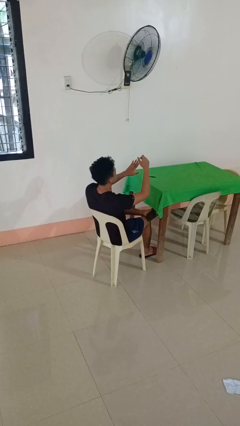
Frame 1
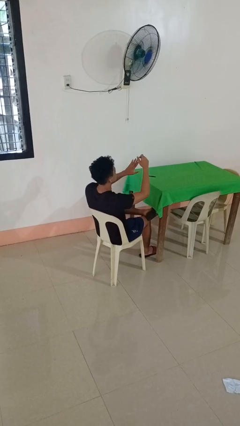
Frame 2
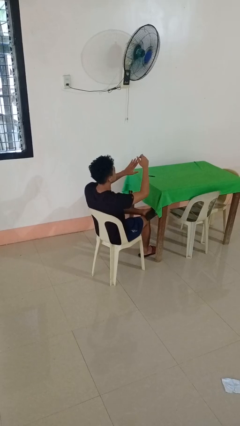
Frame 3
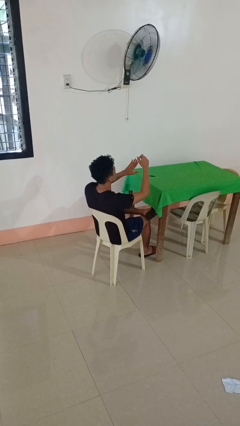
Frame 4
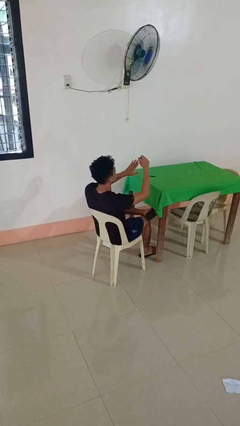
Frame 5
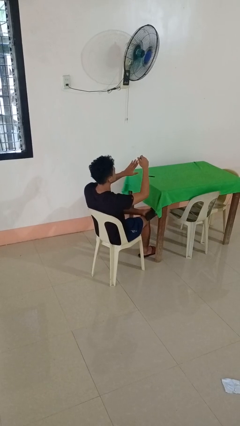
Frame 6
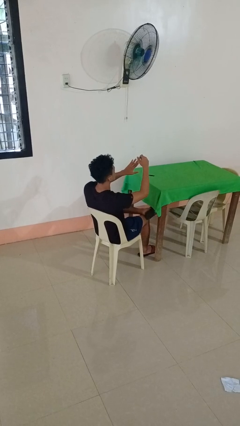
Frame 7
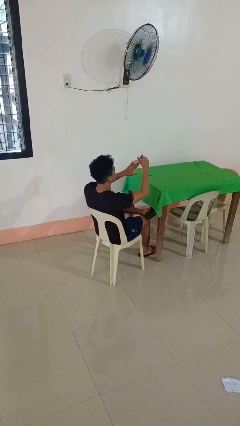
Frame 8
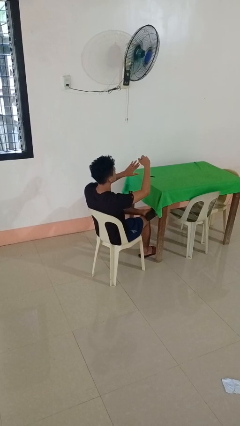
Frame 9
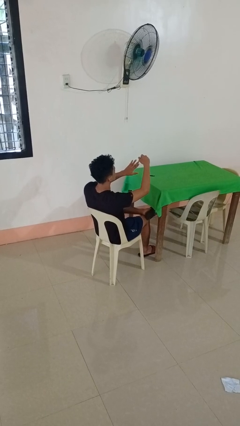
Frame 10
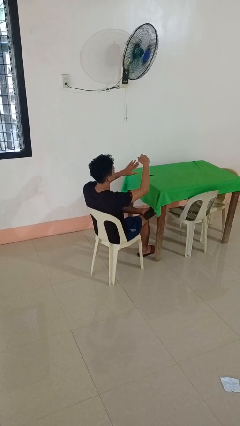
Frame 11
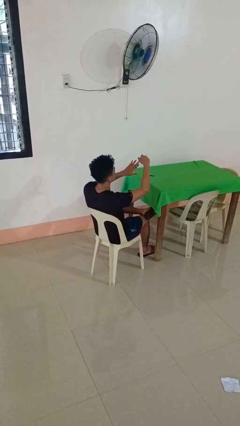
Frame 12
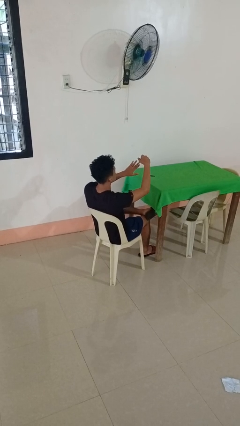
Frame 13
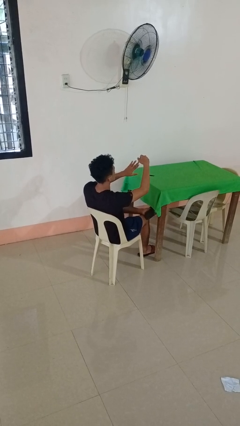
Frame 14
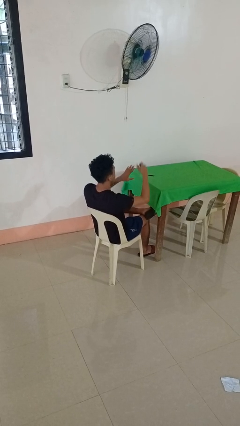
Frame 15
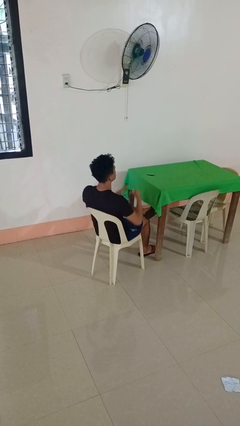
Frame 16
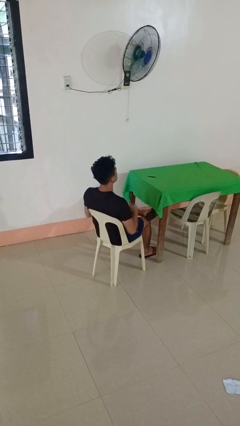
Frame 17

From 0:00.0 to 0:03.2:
person clips fingernails

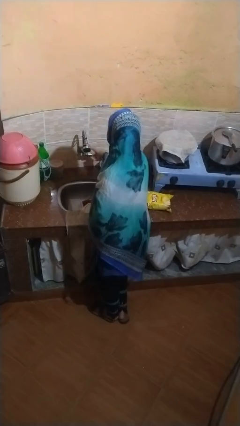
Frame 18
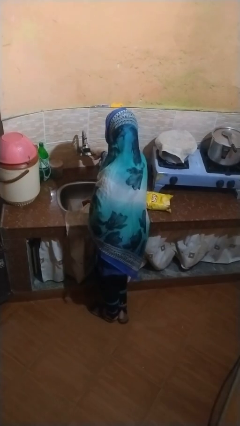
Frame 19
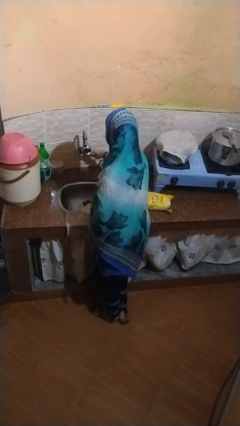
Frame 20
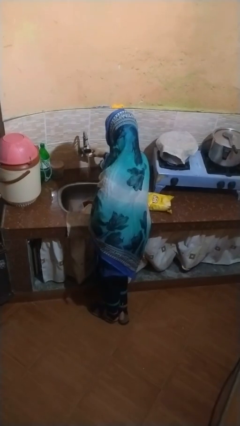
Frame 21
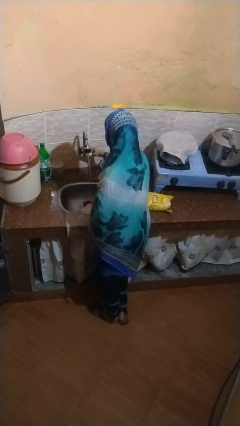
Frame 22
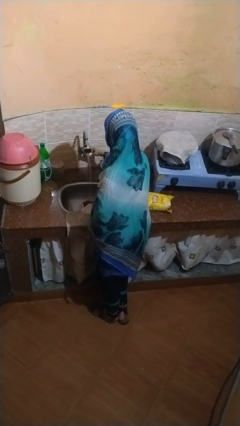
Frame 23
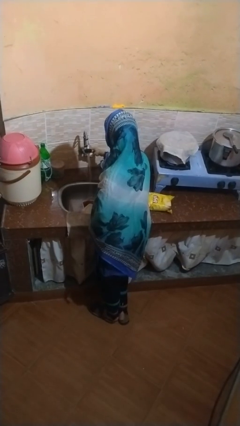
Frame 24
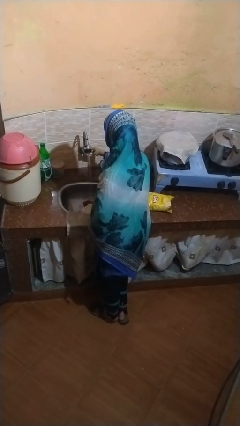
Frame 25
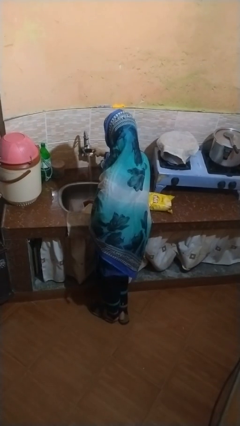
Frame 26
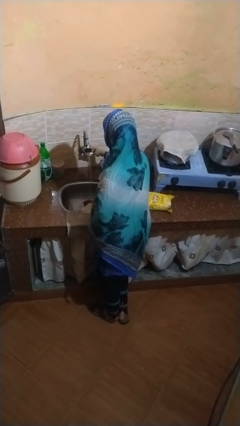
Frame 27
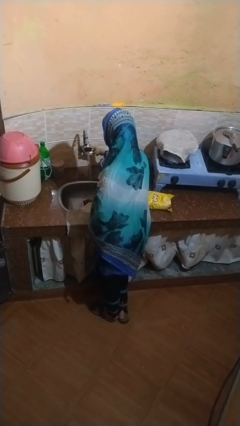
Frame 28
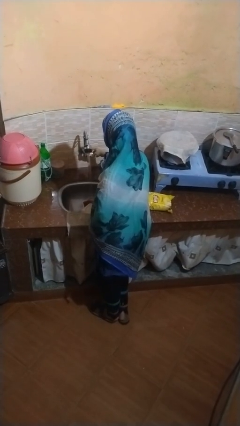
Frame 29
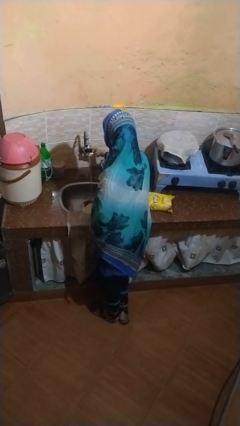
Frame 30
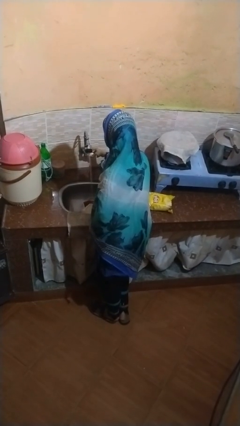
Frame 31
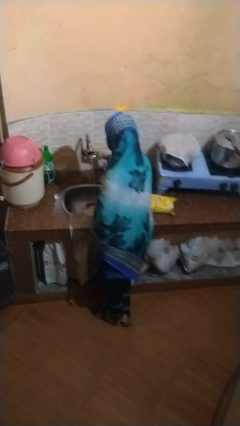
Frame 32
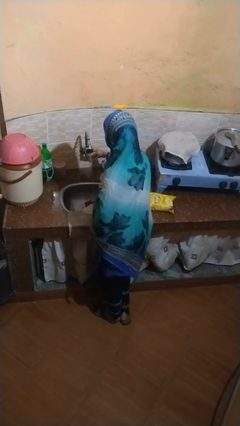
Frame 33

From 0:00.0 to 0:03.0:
person turns on faucet

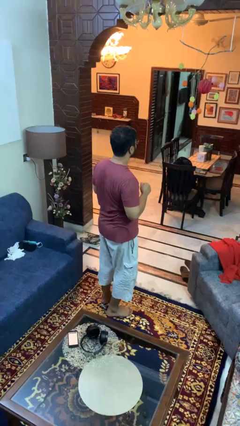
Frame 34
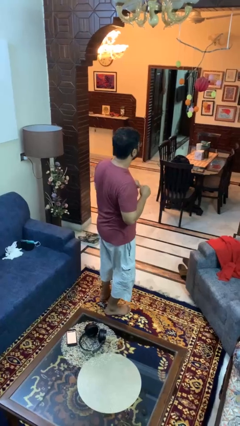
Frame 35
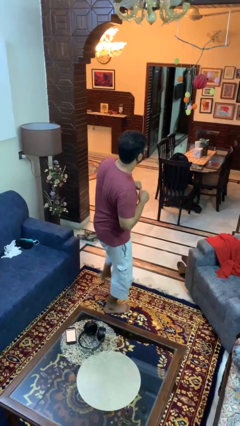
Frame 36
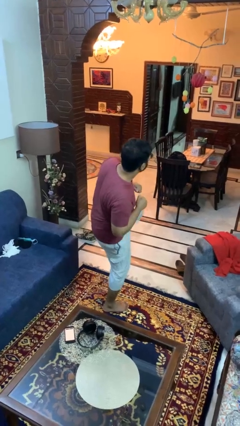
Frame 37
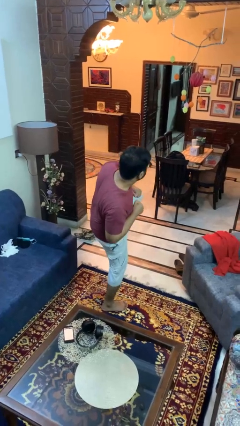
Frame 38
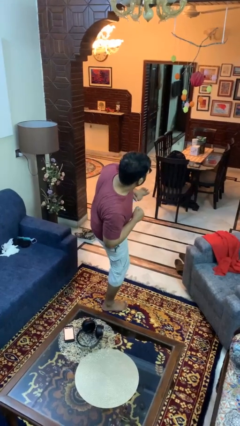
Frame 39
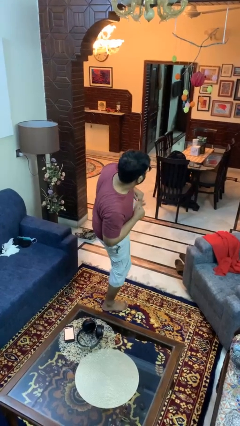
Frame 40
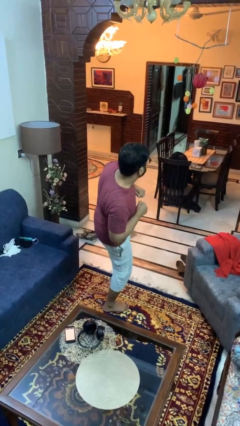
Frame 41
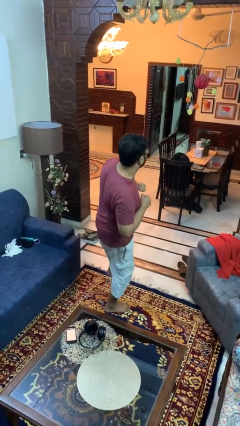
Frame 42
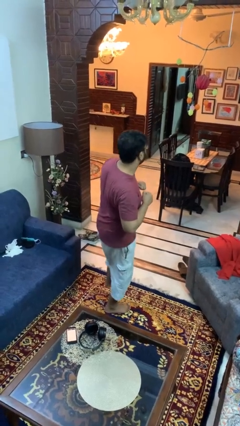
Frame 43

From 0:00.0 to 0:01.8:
person karate kicks

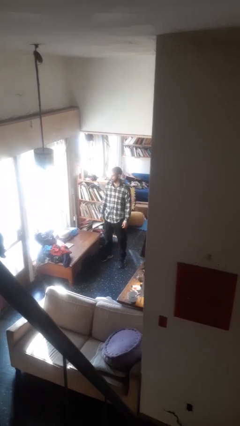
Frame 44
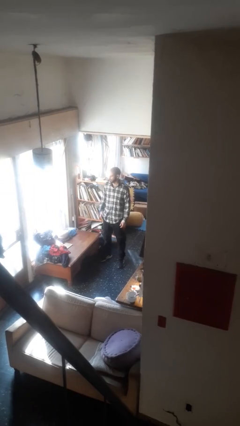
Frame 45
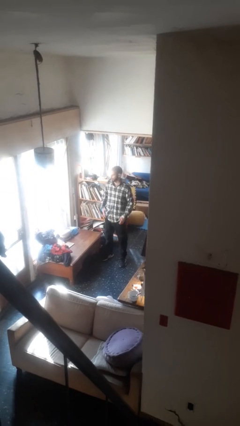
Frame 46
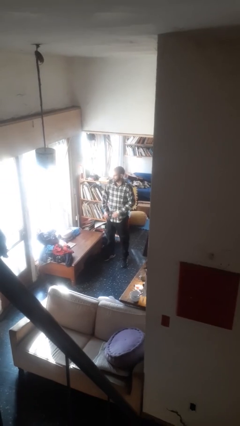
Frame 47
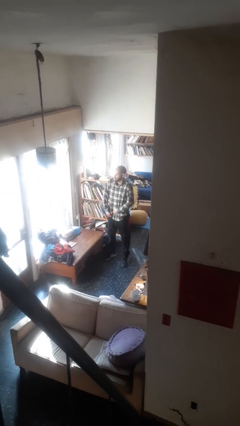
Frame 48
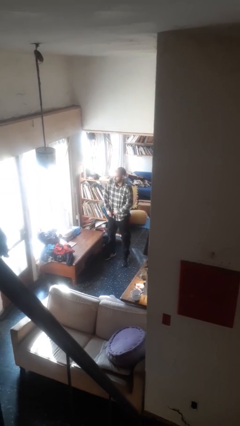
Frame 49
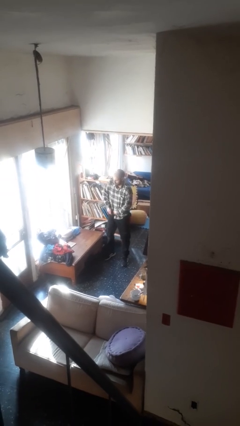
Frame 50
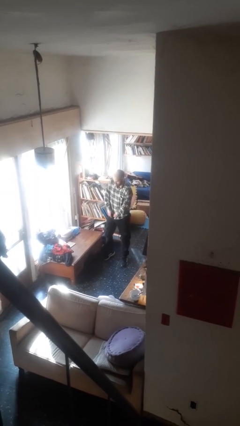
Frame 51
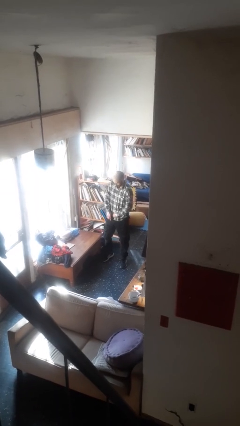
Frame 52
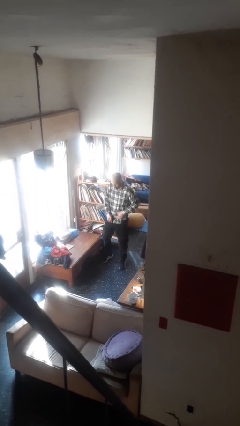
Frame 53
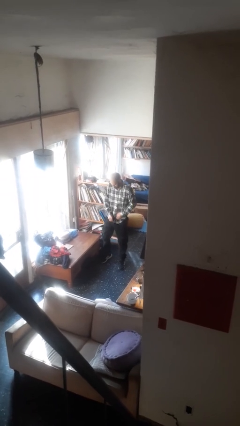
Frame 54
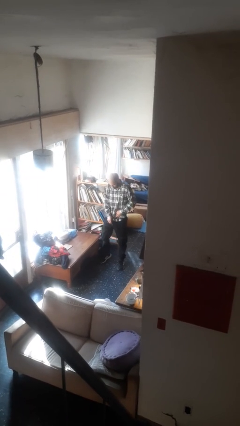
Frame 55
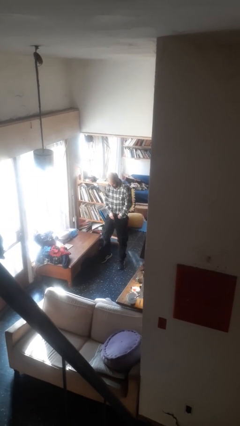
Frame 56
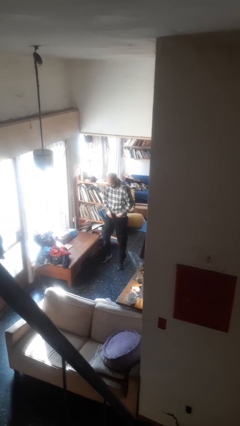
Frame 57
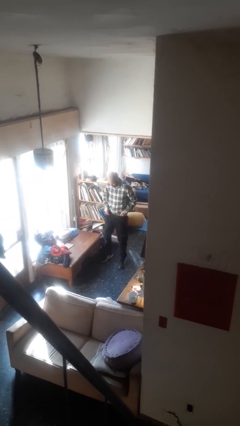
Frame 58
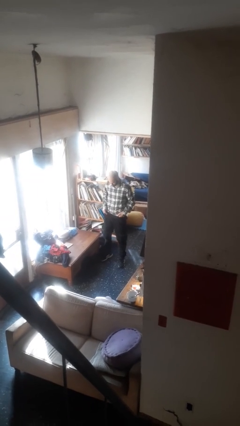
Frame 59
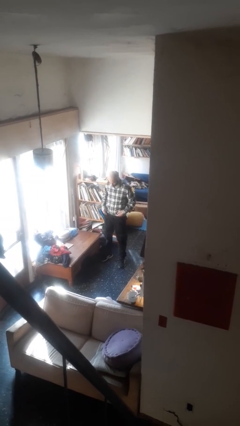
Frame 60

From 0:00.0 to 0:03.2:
person tucks in shirt

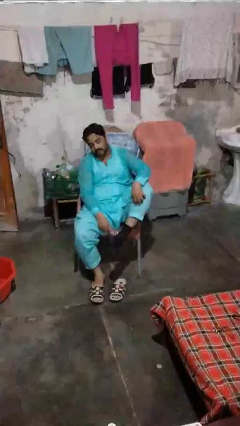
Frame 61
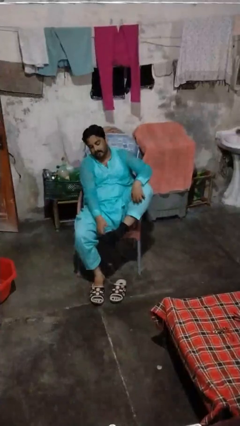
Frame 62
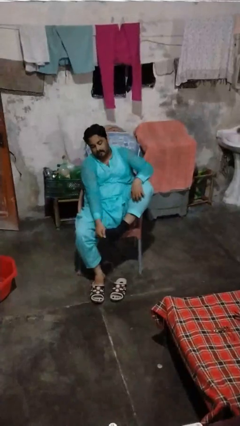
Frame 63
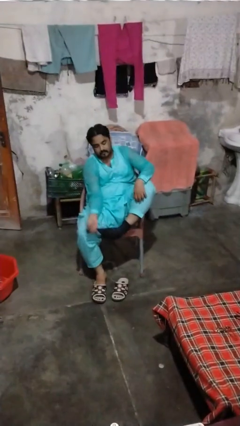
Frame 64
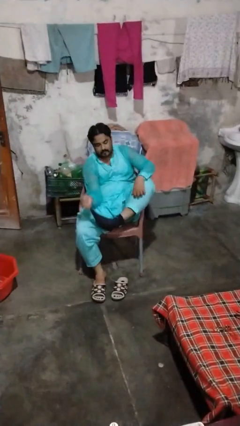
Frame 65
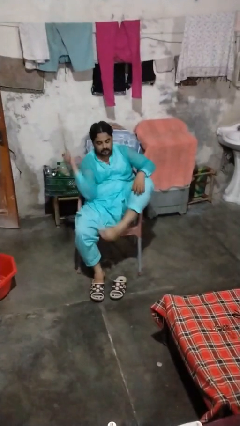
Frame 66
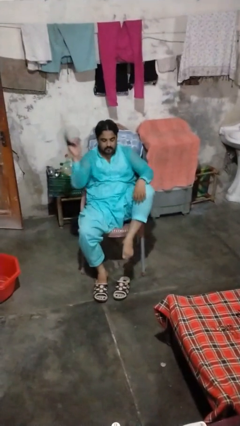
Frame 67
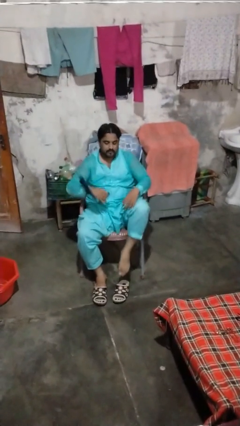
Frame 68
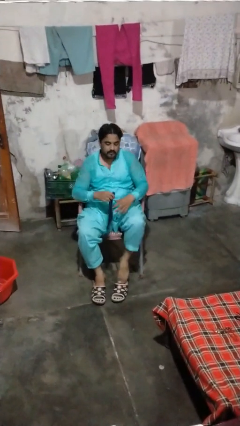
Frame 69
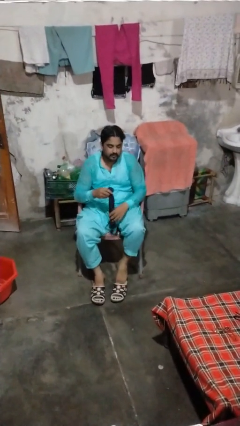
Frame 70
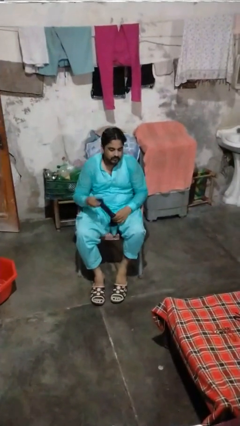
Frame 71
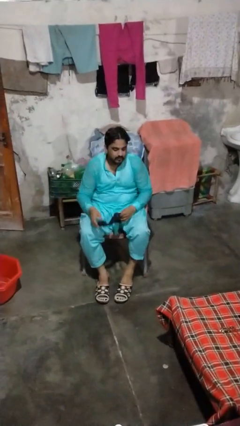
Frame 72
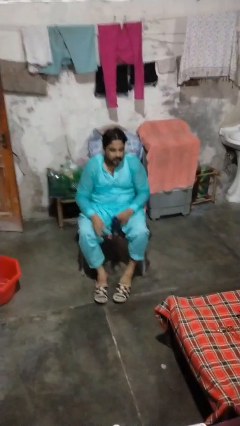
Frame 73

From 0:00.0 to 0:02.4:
person takes off socks

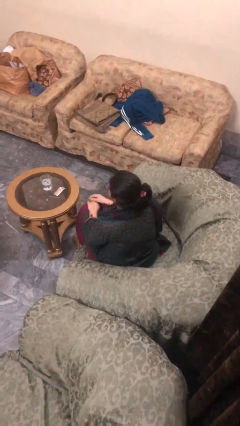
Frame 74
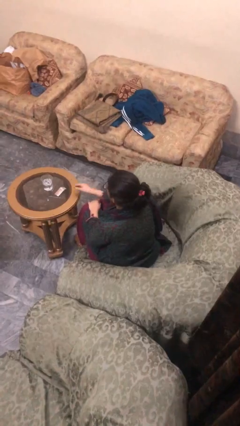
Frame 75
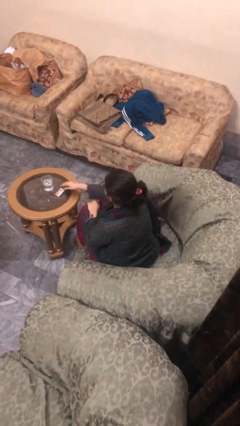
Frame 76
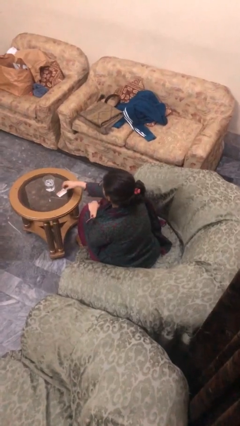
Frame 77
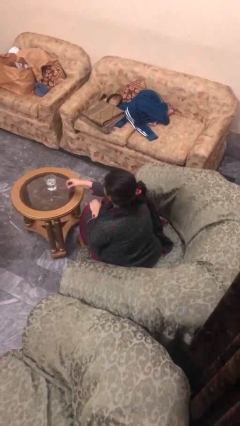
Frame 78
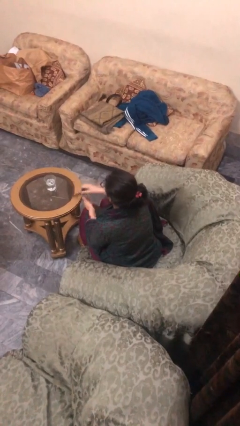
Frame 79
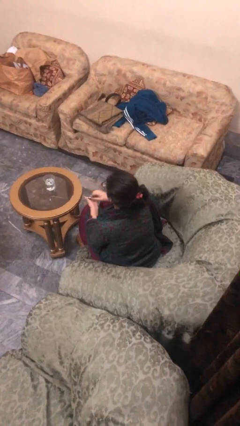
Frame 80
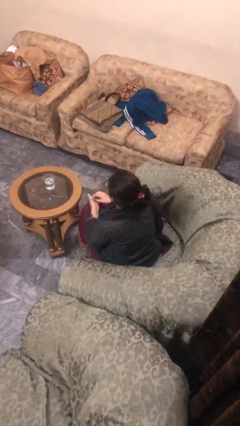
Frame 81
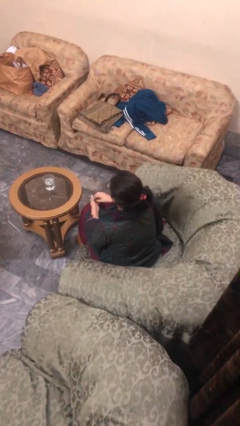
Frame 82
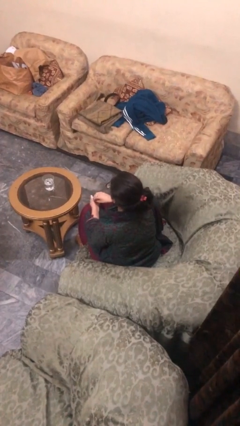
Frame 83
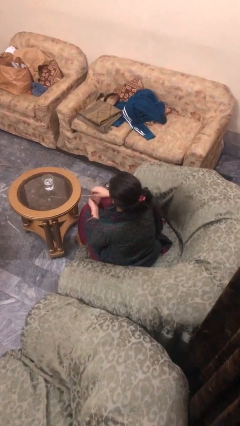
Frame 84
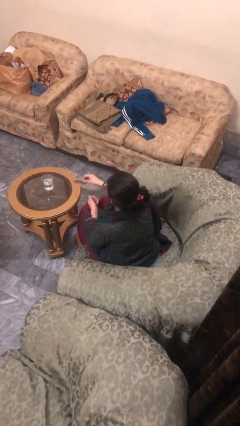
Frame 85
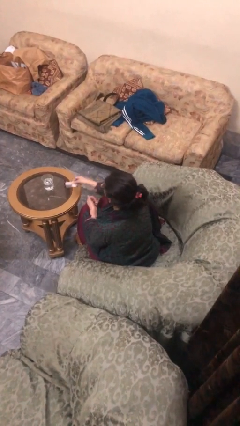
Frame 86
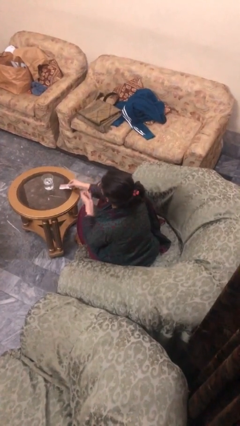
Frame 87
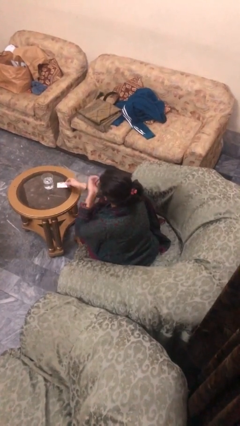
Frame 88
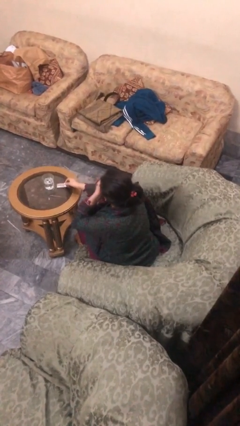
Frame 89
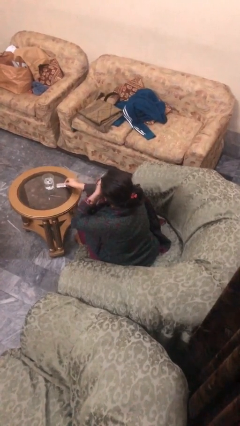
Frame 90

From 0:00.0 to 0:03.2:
person takes medicine pills

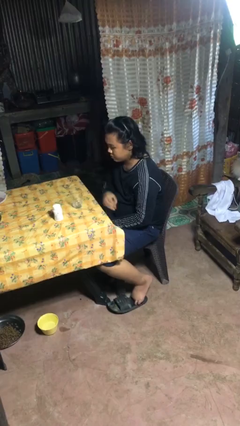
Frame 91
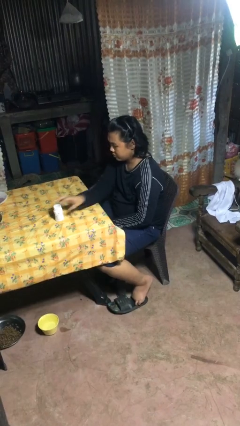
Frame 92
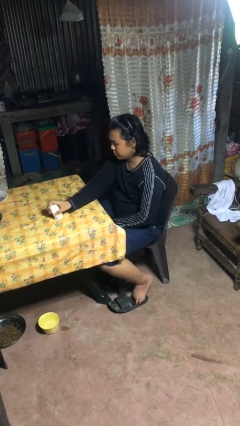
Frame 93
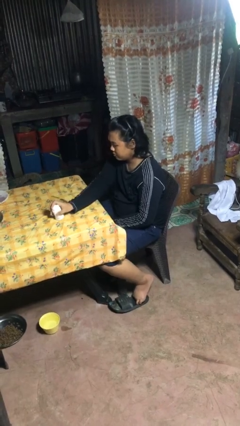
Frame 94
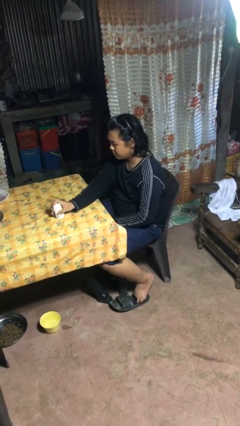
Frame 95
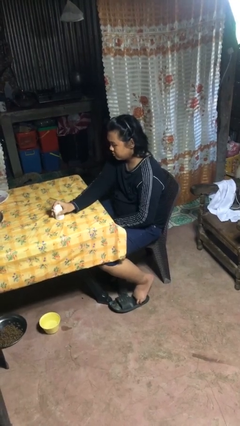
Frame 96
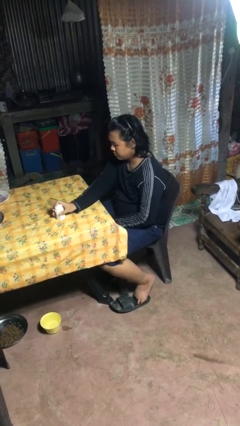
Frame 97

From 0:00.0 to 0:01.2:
person knocks over glass
